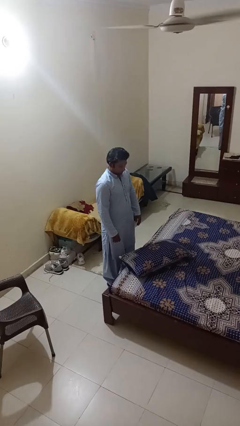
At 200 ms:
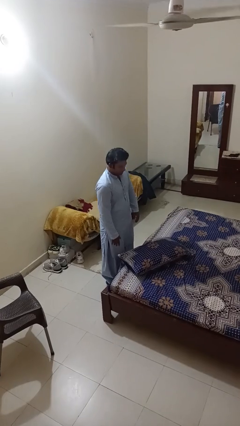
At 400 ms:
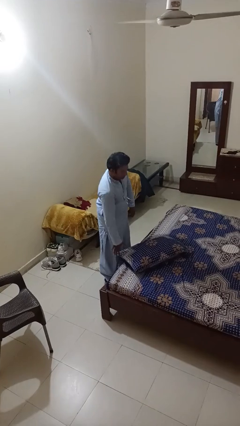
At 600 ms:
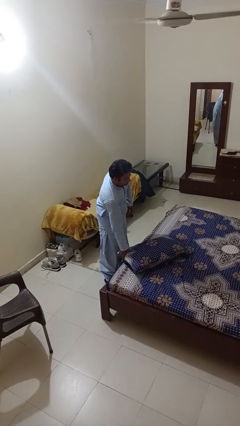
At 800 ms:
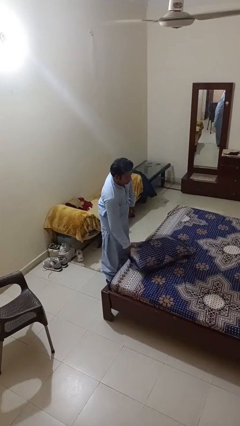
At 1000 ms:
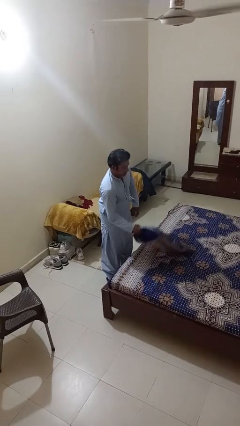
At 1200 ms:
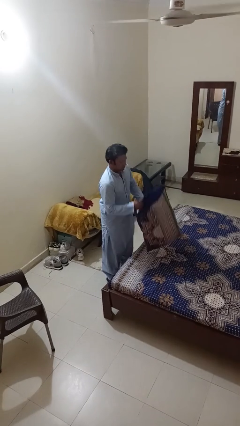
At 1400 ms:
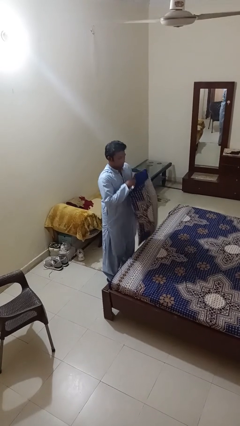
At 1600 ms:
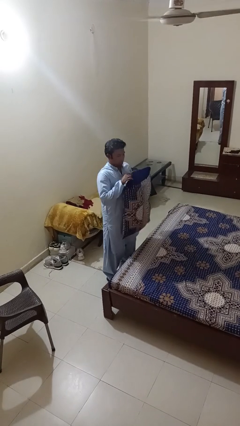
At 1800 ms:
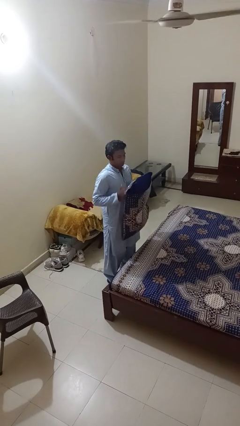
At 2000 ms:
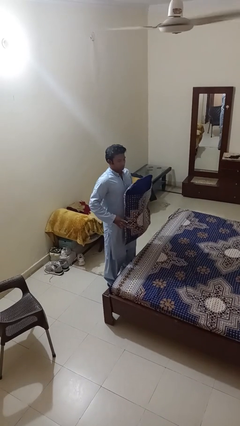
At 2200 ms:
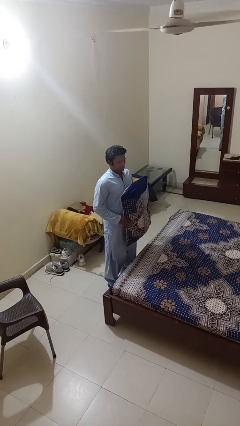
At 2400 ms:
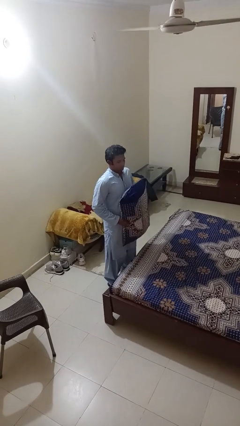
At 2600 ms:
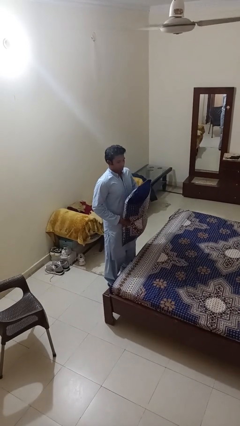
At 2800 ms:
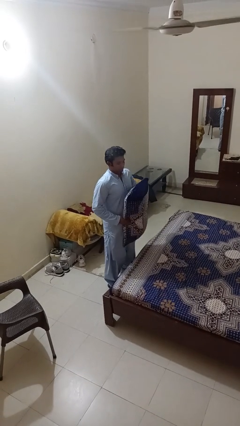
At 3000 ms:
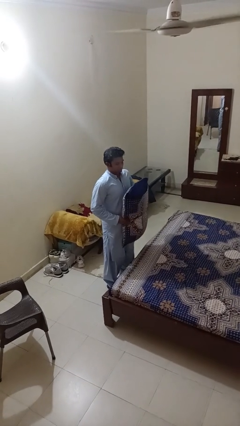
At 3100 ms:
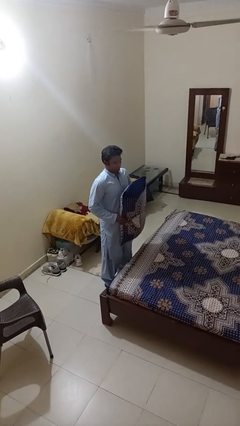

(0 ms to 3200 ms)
person picks up object from bed

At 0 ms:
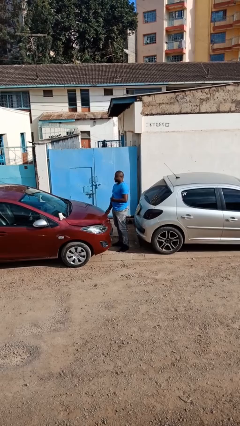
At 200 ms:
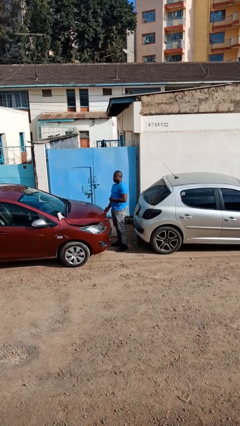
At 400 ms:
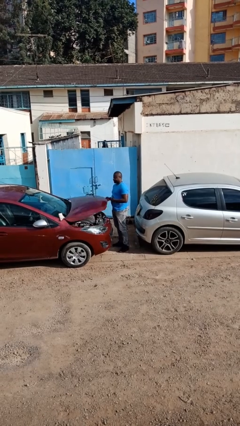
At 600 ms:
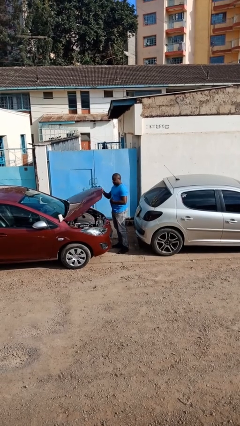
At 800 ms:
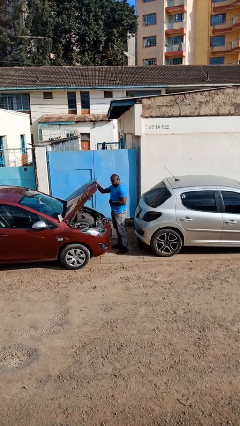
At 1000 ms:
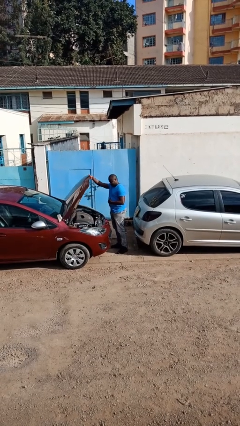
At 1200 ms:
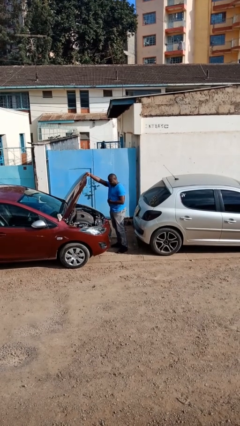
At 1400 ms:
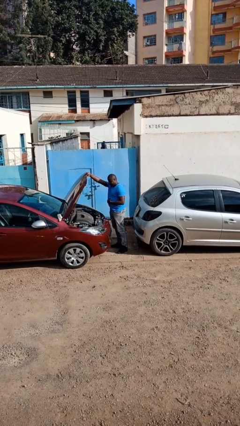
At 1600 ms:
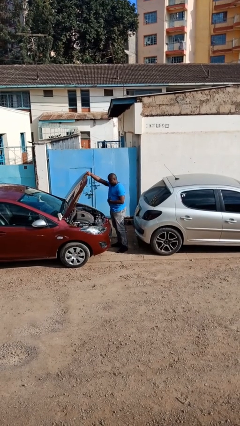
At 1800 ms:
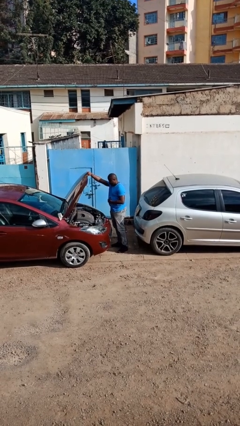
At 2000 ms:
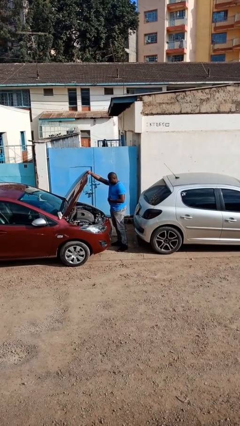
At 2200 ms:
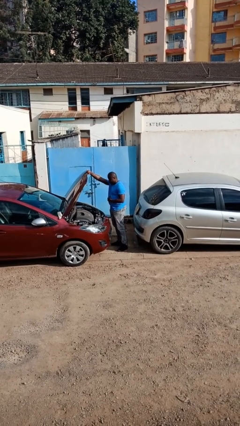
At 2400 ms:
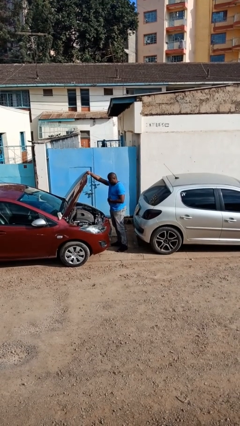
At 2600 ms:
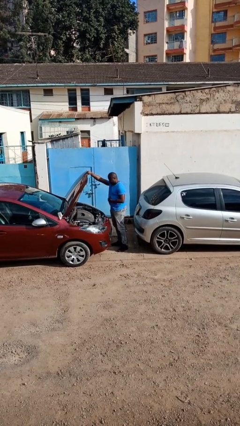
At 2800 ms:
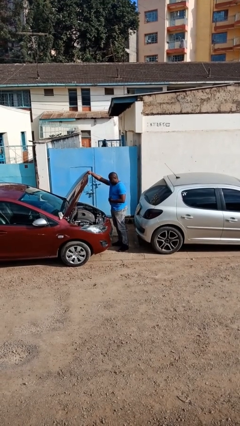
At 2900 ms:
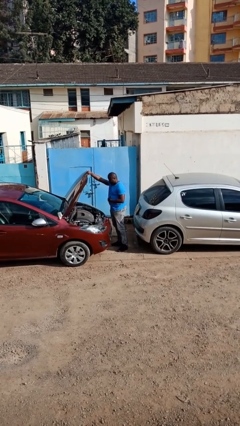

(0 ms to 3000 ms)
person opens car hood

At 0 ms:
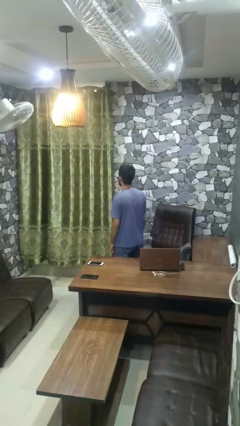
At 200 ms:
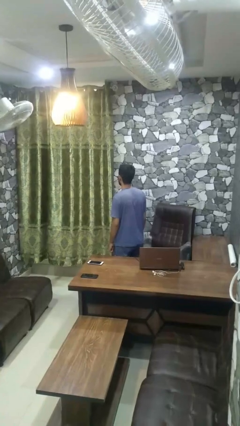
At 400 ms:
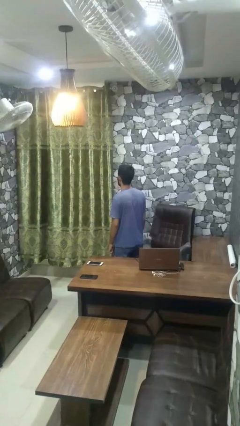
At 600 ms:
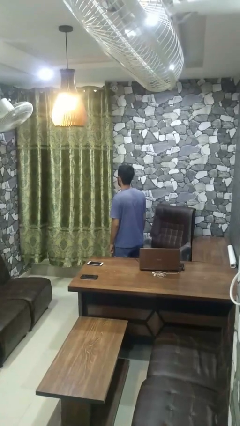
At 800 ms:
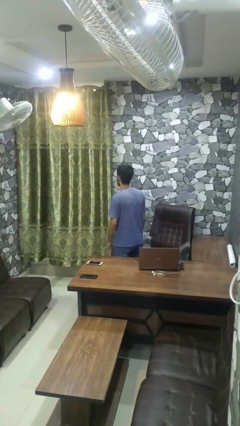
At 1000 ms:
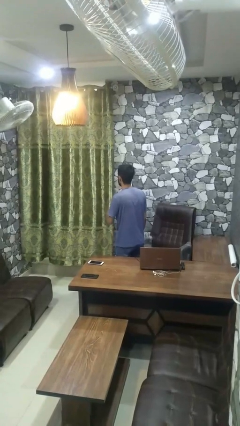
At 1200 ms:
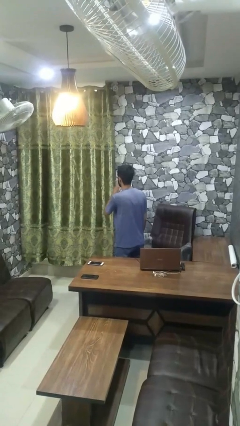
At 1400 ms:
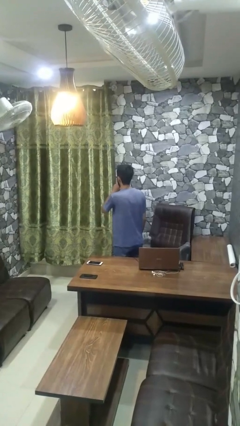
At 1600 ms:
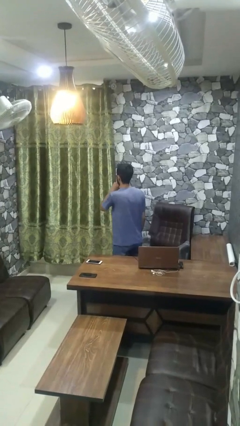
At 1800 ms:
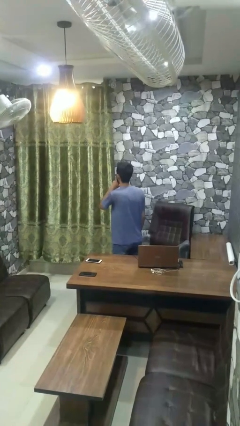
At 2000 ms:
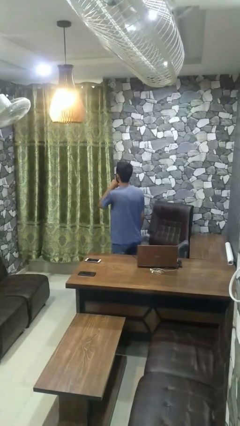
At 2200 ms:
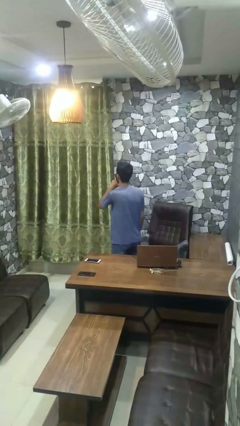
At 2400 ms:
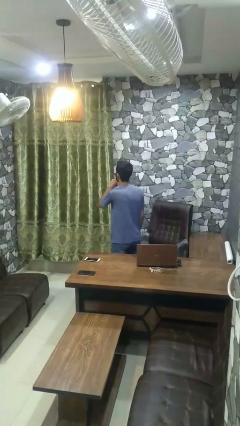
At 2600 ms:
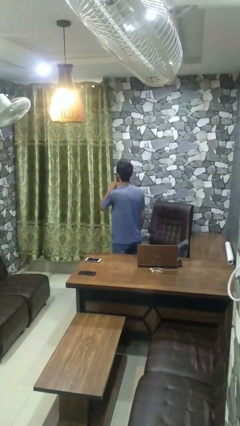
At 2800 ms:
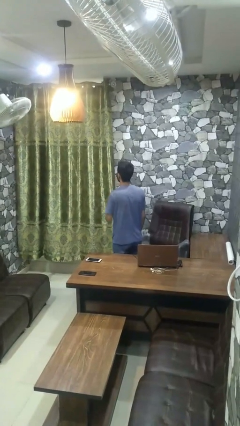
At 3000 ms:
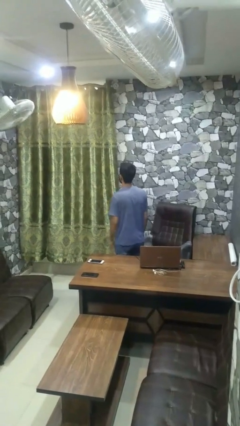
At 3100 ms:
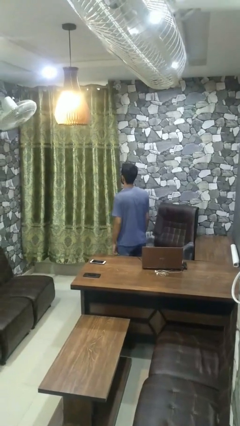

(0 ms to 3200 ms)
person gestures be quiet

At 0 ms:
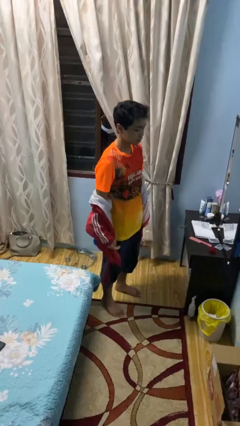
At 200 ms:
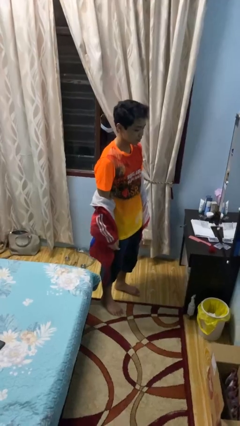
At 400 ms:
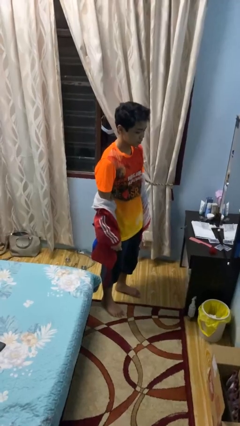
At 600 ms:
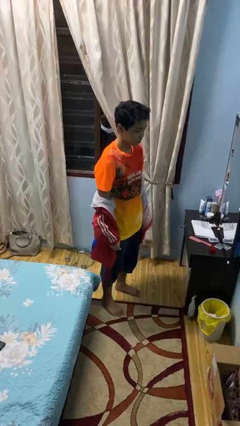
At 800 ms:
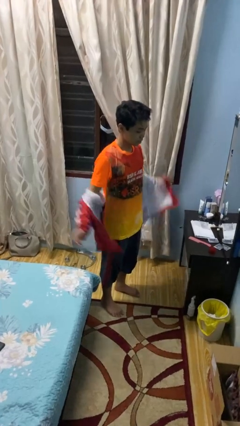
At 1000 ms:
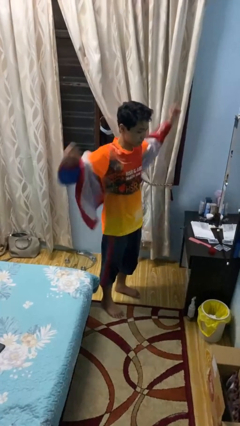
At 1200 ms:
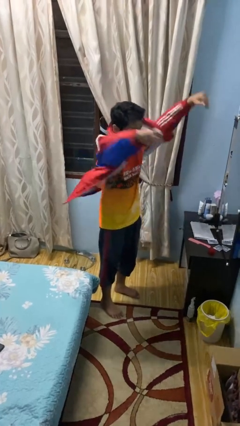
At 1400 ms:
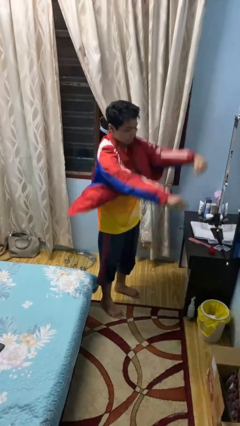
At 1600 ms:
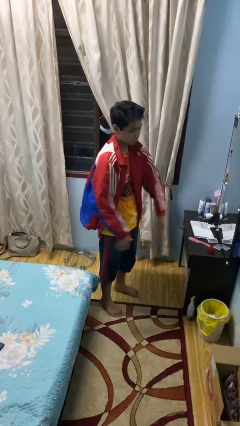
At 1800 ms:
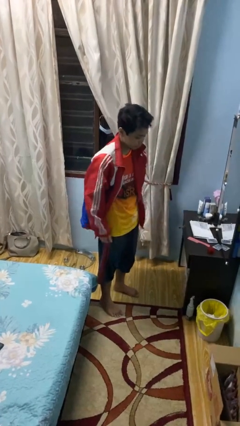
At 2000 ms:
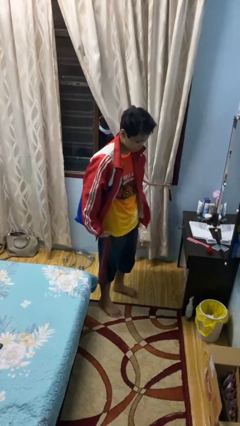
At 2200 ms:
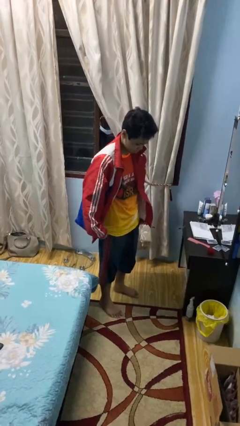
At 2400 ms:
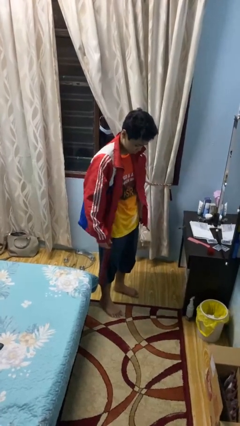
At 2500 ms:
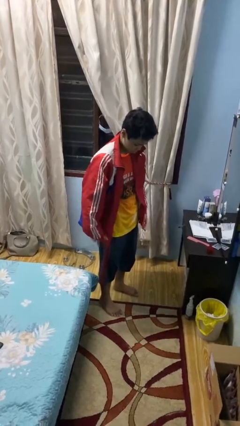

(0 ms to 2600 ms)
person puts on jacket

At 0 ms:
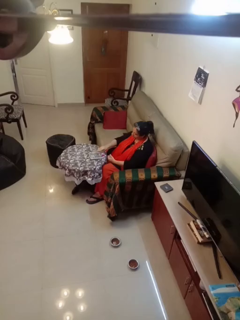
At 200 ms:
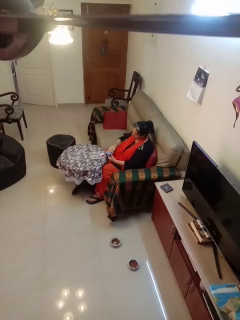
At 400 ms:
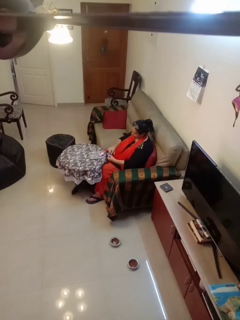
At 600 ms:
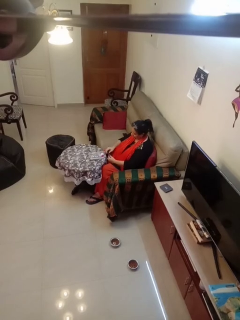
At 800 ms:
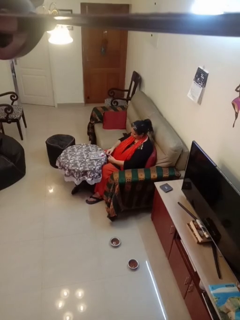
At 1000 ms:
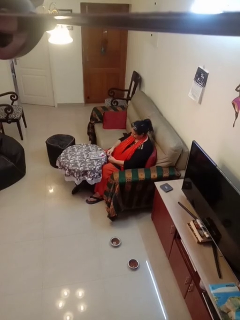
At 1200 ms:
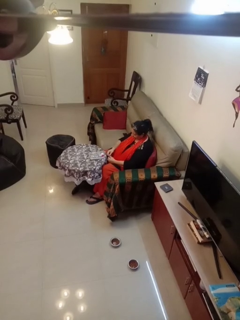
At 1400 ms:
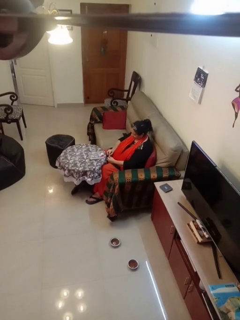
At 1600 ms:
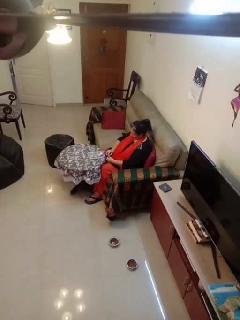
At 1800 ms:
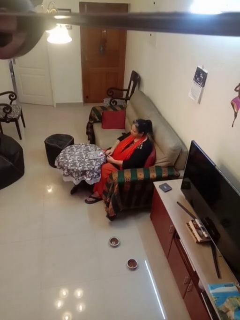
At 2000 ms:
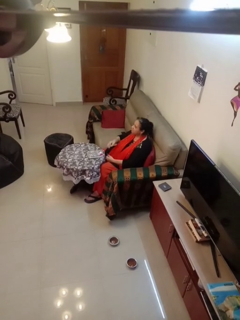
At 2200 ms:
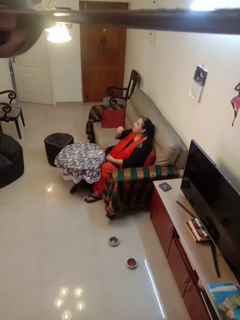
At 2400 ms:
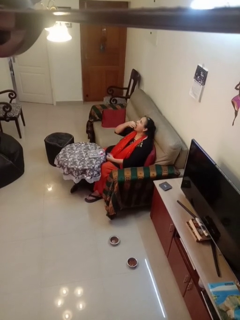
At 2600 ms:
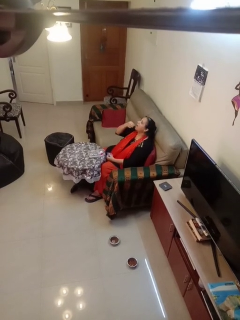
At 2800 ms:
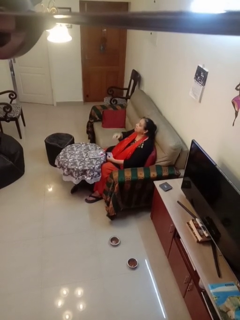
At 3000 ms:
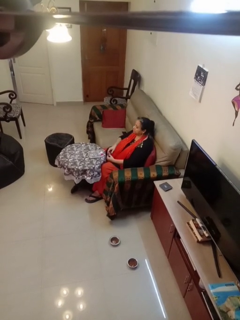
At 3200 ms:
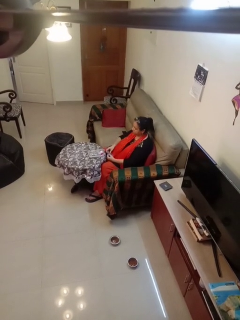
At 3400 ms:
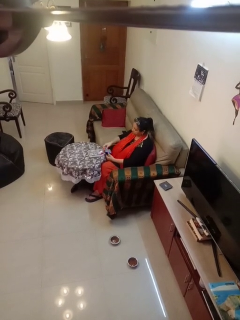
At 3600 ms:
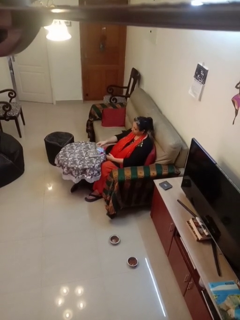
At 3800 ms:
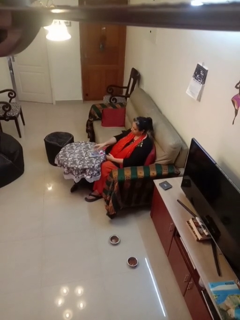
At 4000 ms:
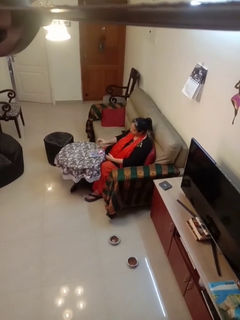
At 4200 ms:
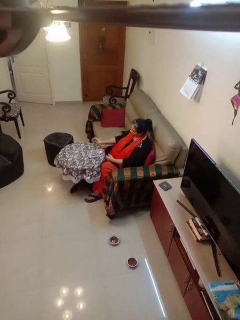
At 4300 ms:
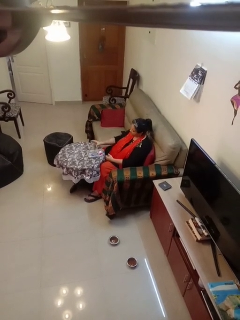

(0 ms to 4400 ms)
person takes medicine pills

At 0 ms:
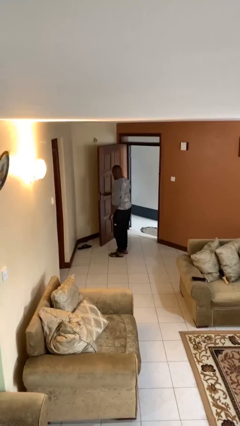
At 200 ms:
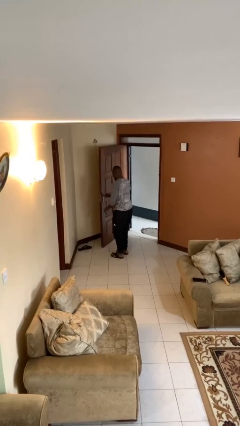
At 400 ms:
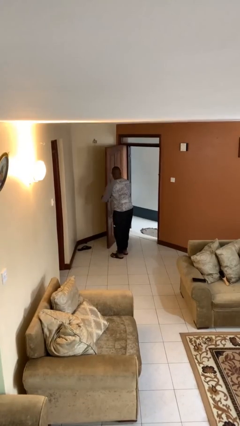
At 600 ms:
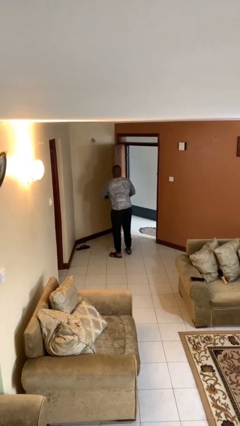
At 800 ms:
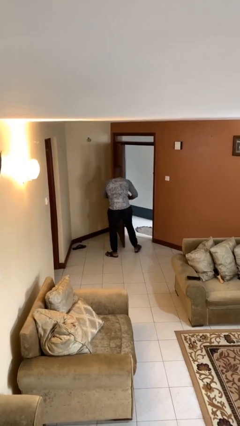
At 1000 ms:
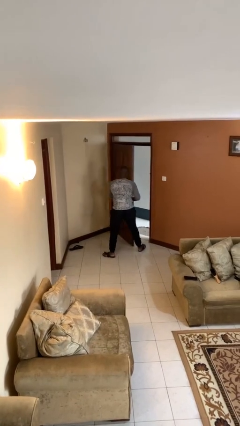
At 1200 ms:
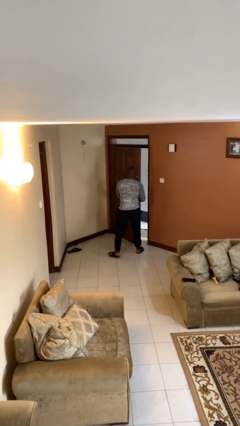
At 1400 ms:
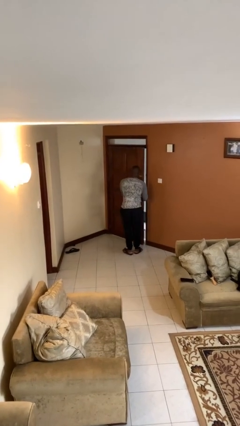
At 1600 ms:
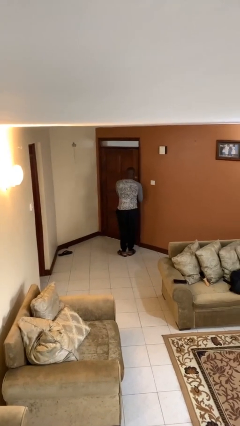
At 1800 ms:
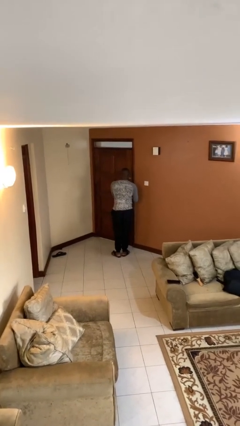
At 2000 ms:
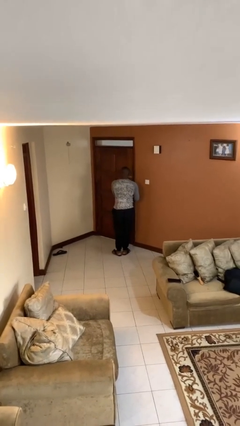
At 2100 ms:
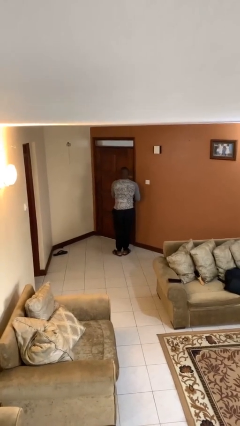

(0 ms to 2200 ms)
person closes facility door
